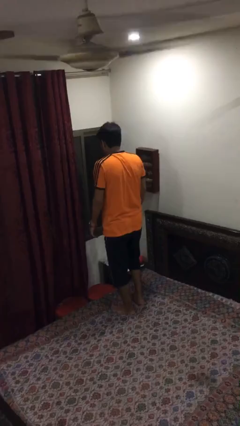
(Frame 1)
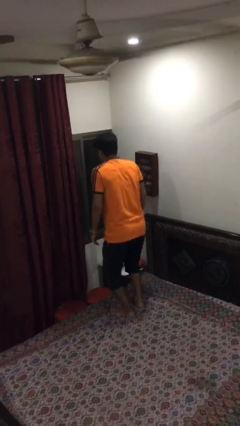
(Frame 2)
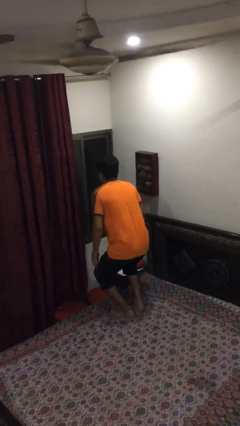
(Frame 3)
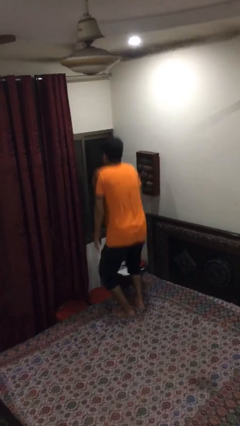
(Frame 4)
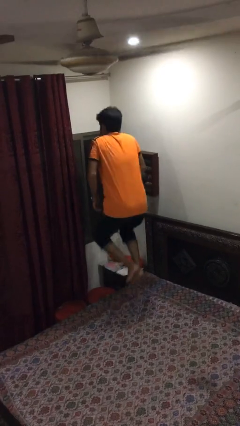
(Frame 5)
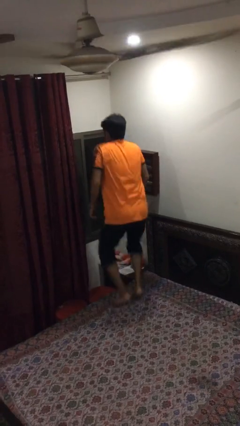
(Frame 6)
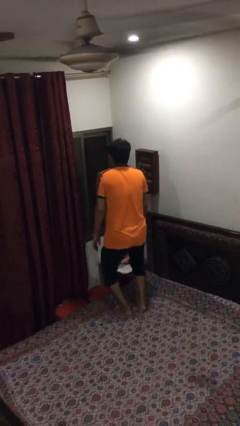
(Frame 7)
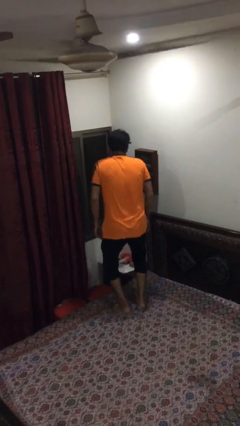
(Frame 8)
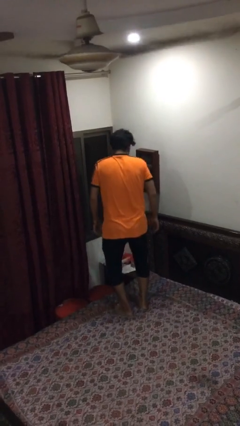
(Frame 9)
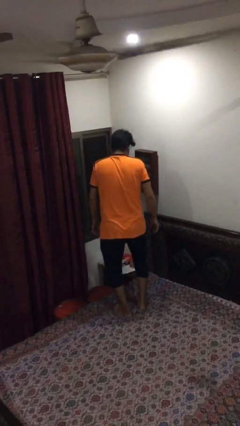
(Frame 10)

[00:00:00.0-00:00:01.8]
person jumps on bed

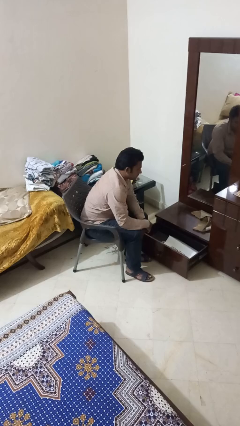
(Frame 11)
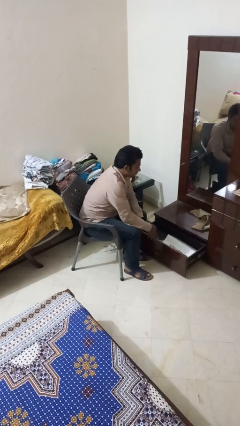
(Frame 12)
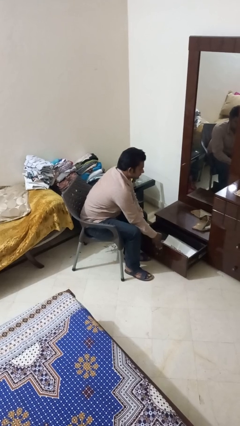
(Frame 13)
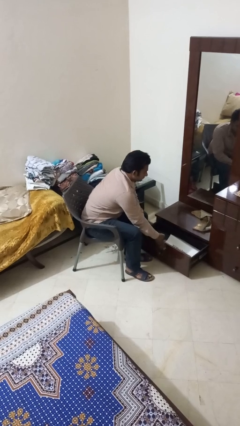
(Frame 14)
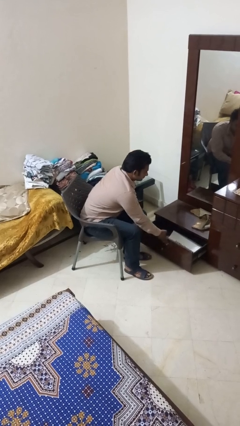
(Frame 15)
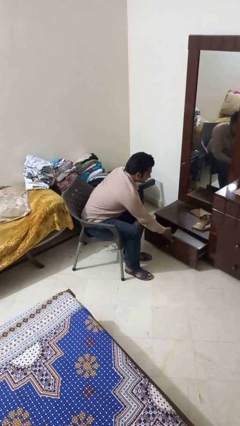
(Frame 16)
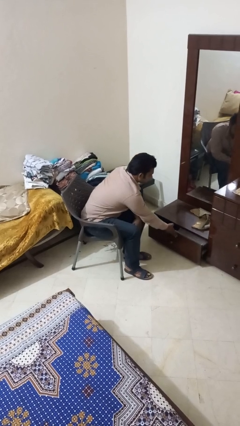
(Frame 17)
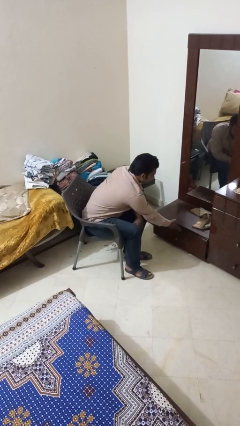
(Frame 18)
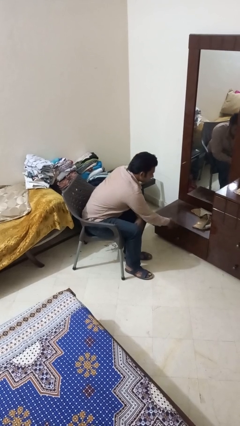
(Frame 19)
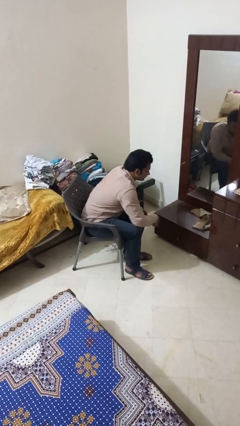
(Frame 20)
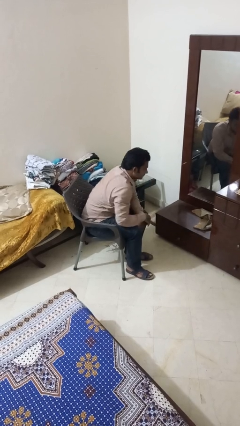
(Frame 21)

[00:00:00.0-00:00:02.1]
person closes closet door

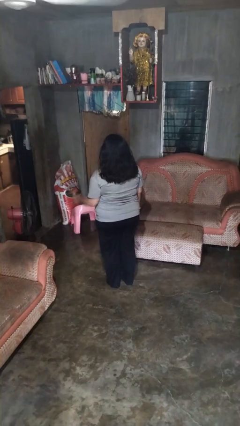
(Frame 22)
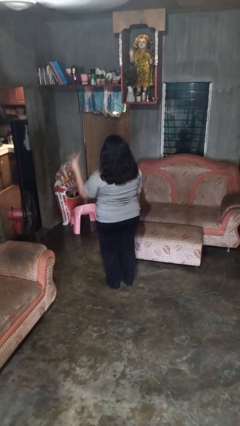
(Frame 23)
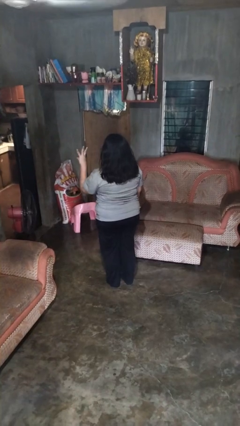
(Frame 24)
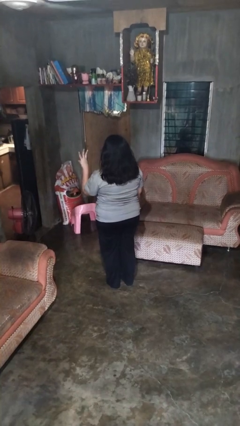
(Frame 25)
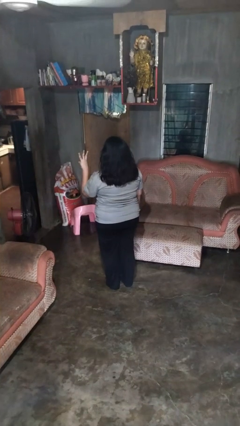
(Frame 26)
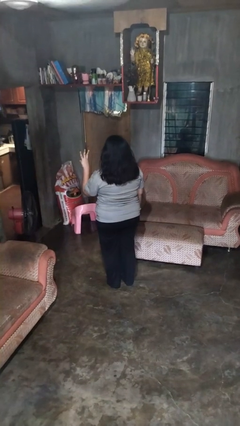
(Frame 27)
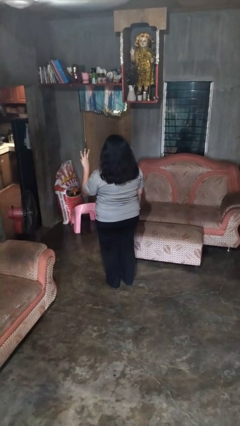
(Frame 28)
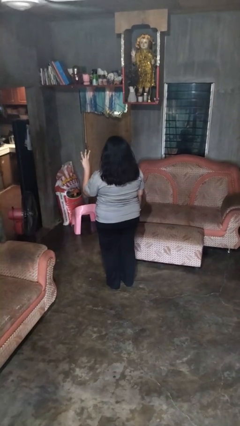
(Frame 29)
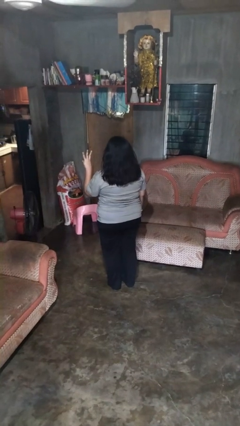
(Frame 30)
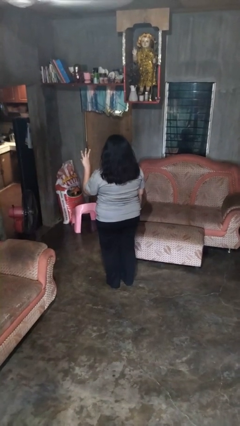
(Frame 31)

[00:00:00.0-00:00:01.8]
person gestures number three

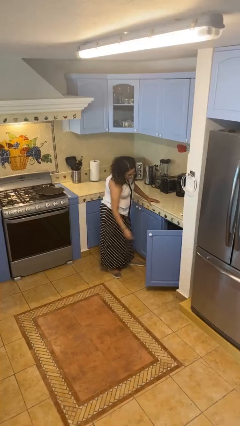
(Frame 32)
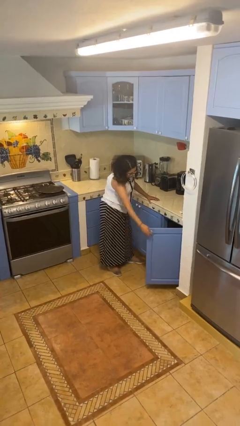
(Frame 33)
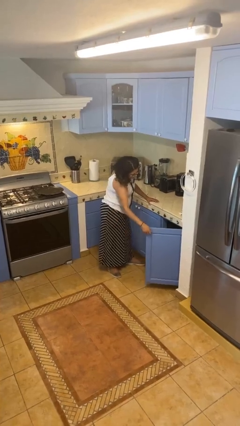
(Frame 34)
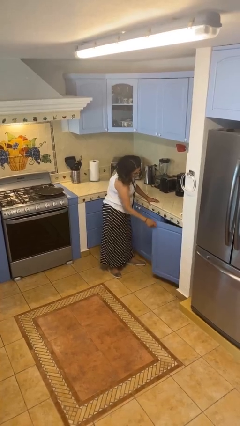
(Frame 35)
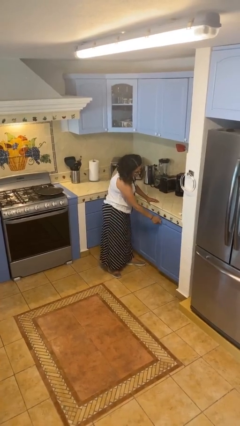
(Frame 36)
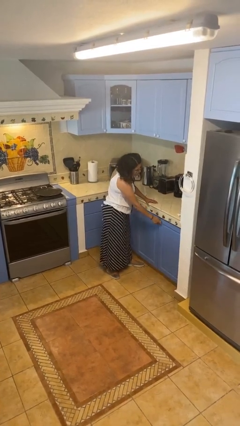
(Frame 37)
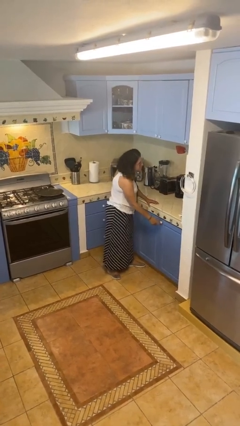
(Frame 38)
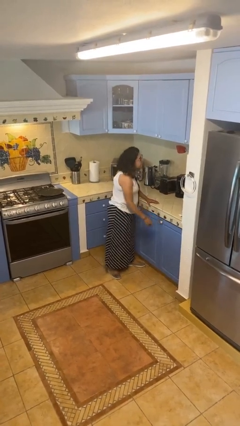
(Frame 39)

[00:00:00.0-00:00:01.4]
person closes cabinet

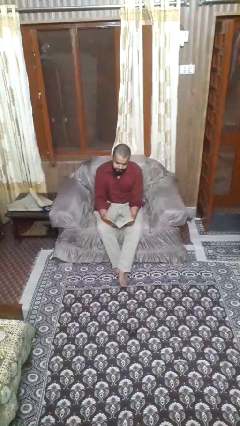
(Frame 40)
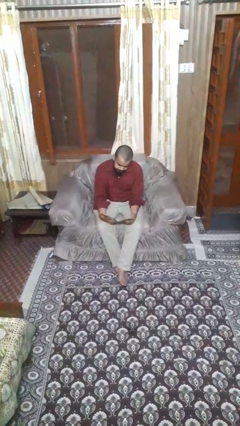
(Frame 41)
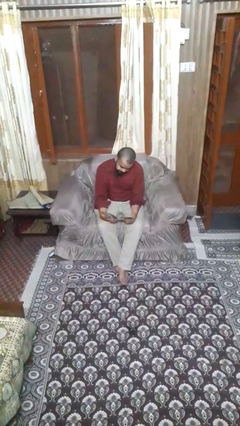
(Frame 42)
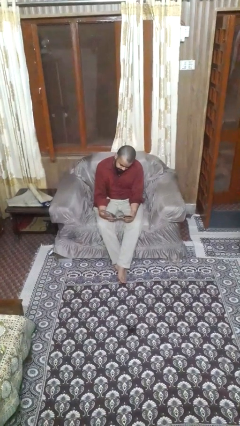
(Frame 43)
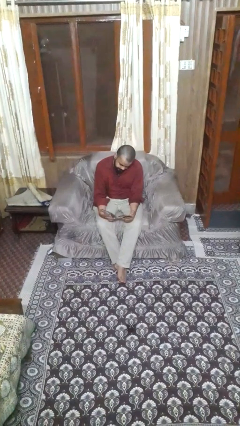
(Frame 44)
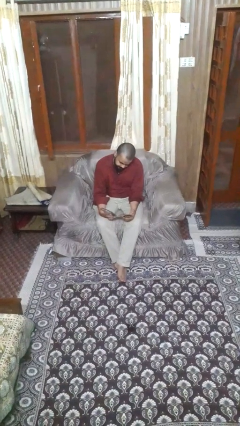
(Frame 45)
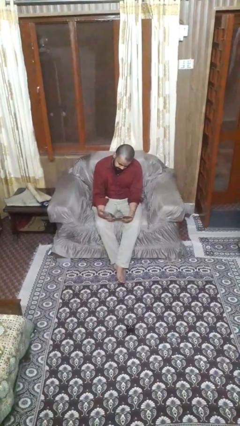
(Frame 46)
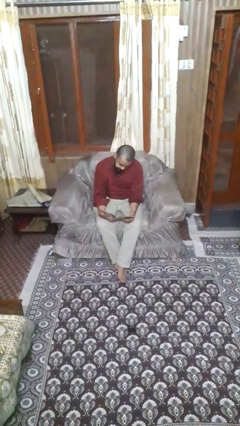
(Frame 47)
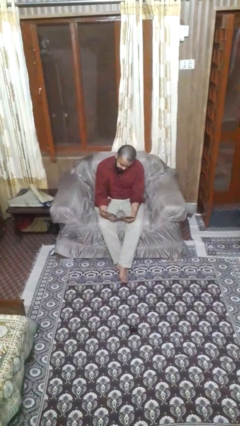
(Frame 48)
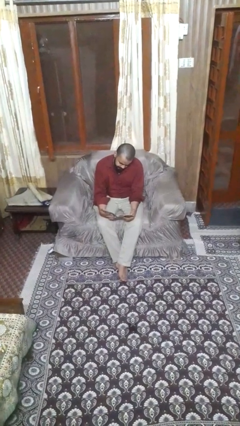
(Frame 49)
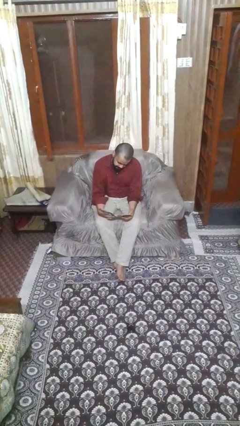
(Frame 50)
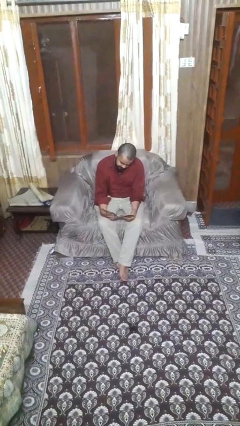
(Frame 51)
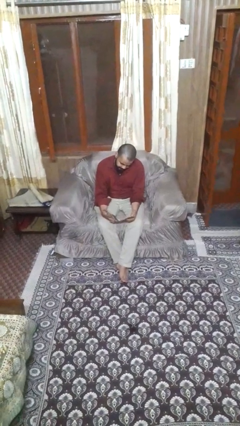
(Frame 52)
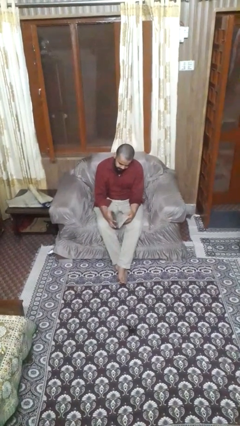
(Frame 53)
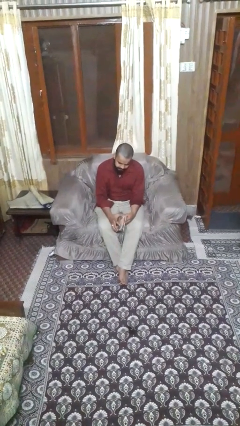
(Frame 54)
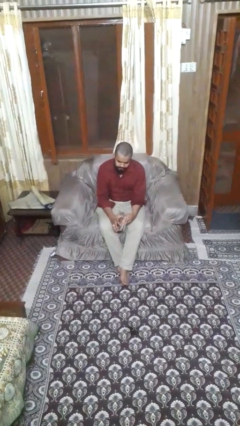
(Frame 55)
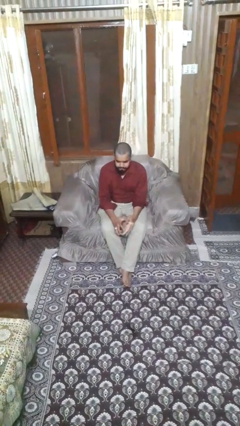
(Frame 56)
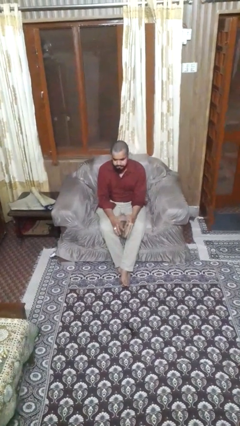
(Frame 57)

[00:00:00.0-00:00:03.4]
person reads magazine

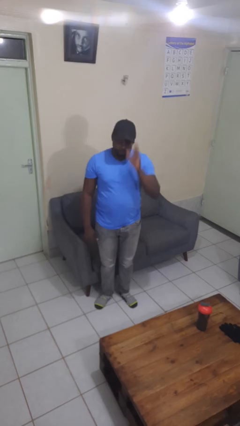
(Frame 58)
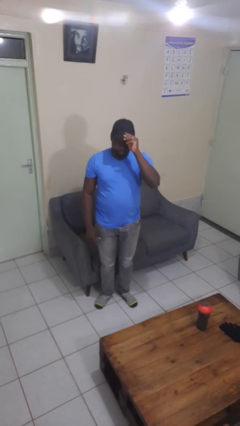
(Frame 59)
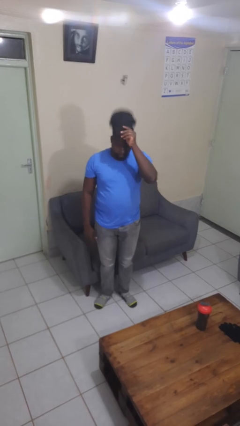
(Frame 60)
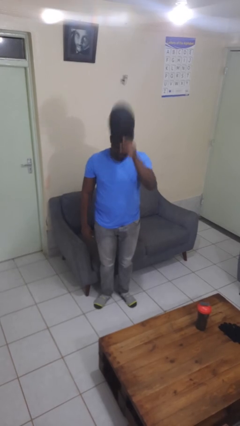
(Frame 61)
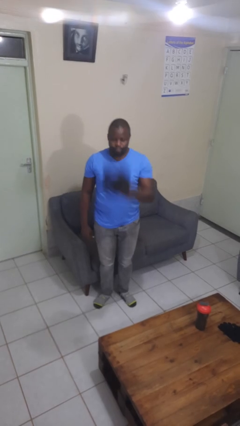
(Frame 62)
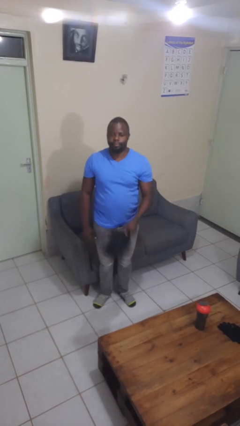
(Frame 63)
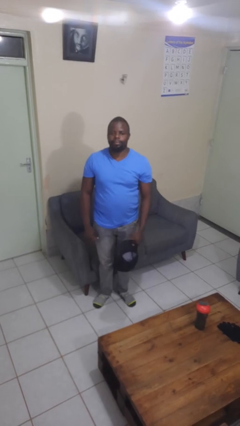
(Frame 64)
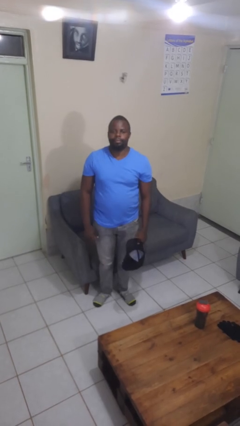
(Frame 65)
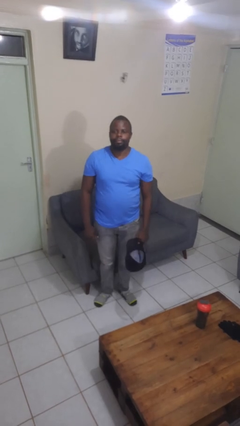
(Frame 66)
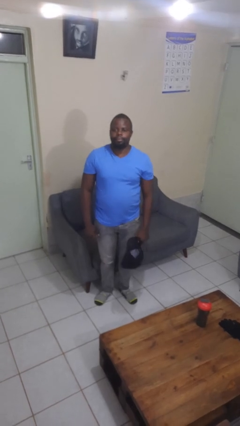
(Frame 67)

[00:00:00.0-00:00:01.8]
person takes off hat

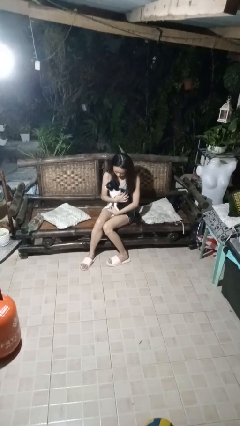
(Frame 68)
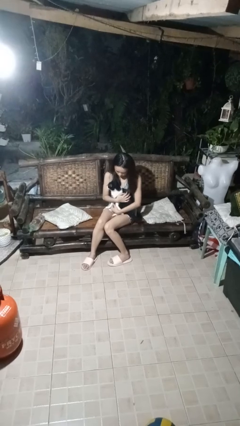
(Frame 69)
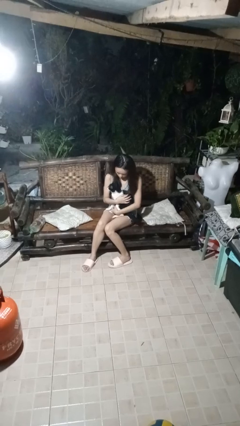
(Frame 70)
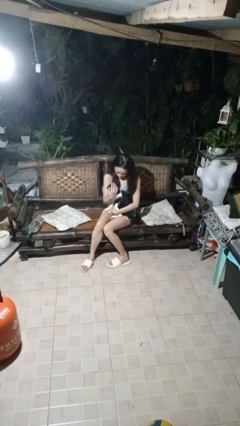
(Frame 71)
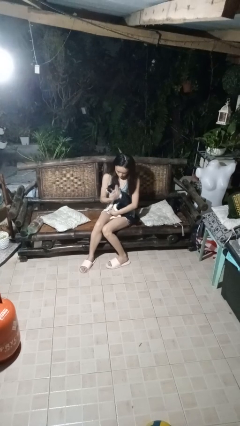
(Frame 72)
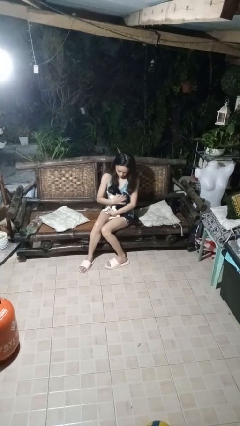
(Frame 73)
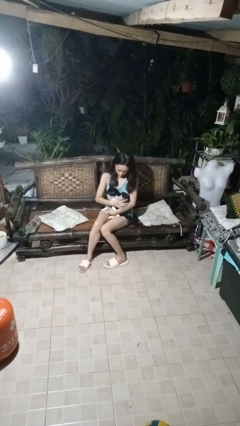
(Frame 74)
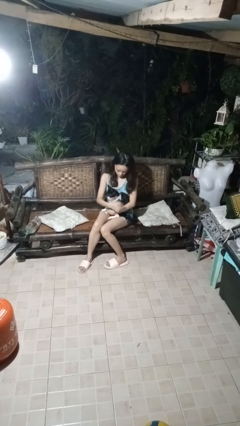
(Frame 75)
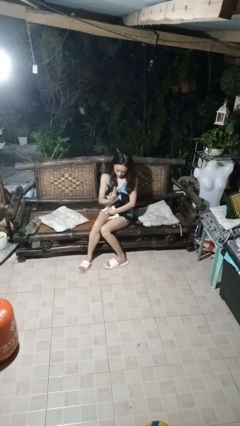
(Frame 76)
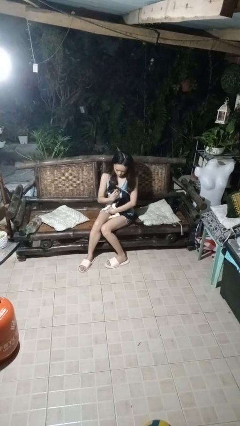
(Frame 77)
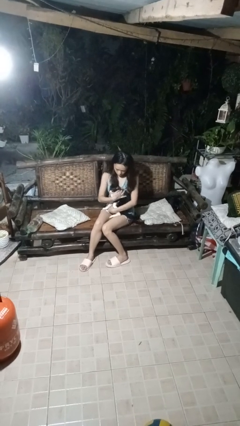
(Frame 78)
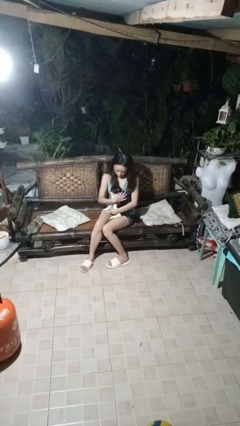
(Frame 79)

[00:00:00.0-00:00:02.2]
person pets cat

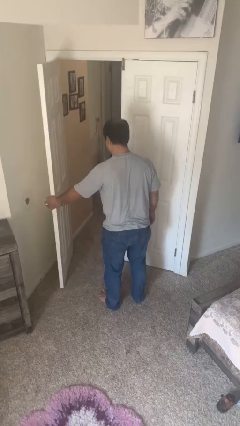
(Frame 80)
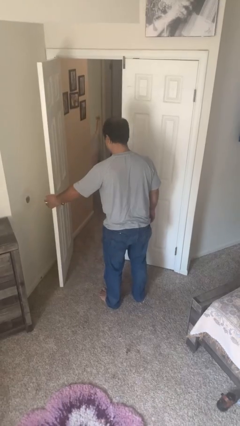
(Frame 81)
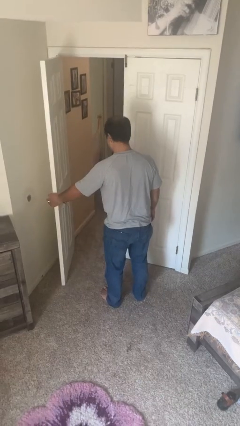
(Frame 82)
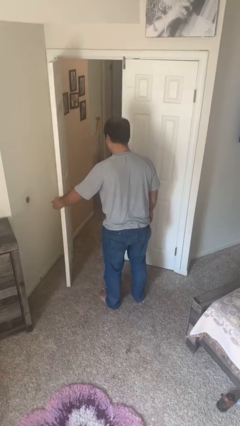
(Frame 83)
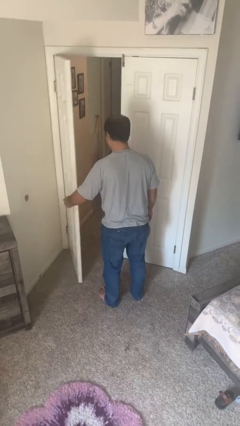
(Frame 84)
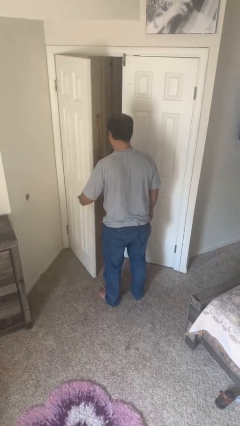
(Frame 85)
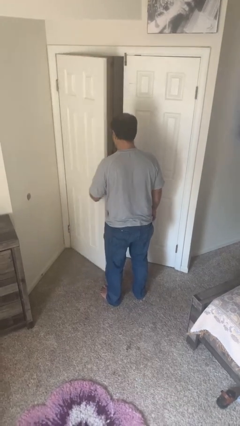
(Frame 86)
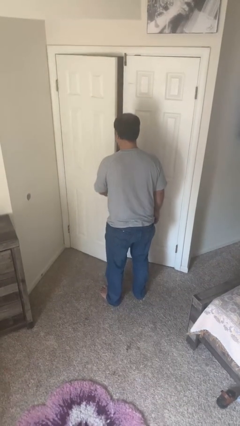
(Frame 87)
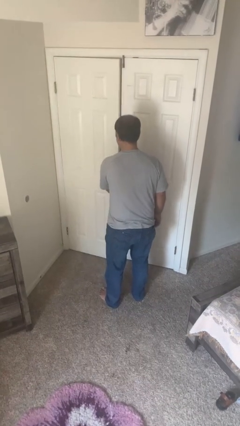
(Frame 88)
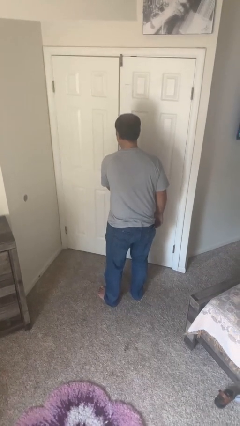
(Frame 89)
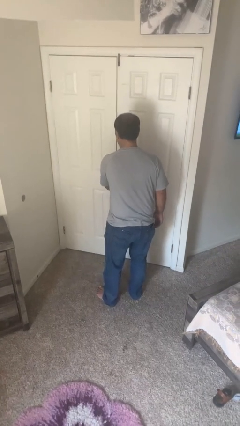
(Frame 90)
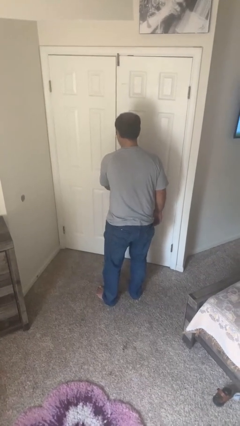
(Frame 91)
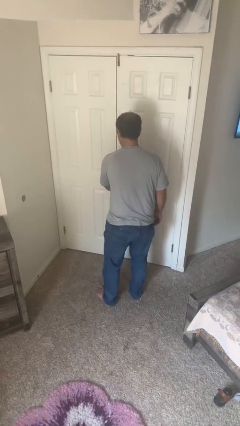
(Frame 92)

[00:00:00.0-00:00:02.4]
person closes facility door
